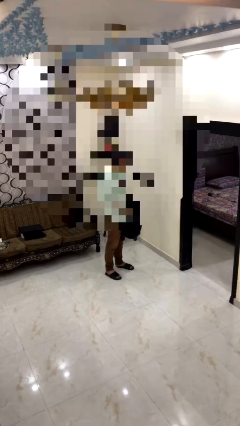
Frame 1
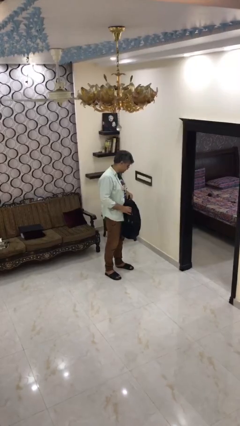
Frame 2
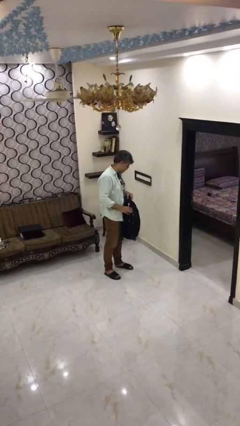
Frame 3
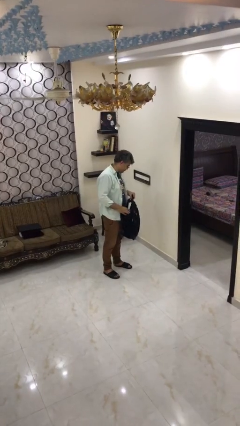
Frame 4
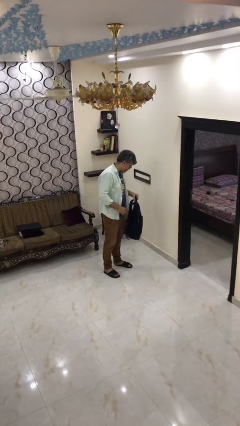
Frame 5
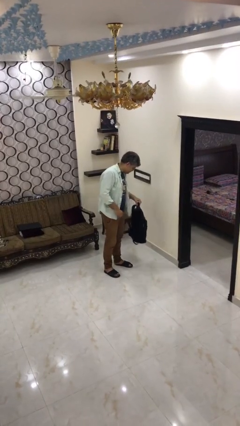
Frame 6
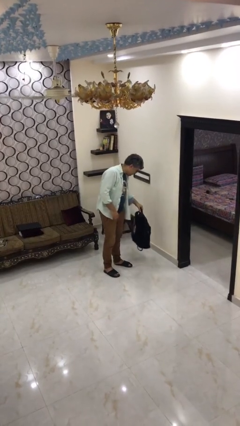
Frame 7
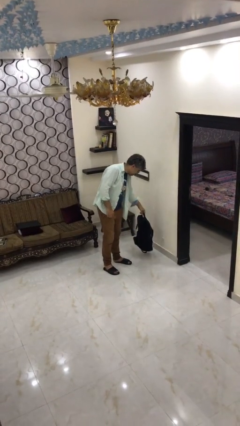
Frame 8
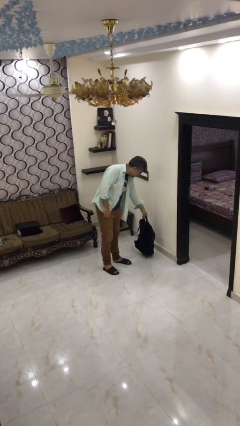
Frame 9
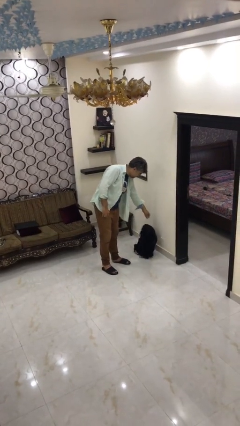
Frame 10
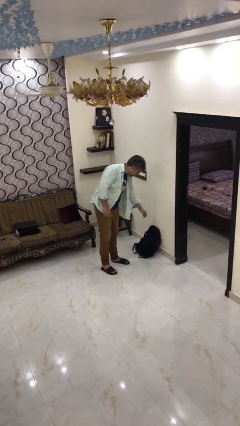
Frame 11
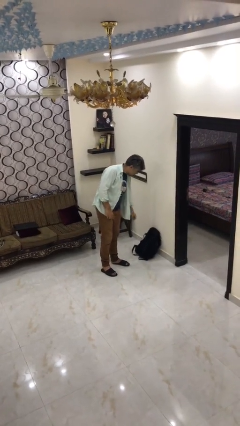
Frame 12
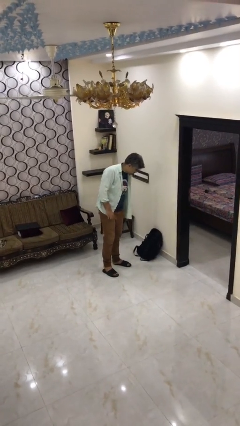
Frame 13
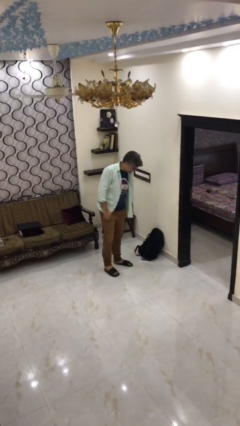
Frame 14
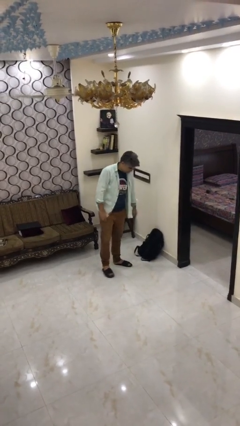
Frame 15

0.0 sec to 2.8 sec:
person puts down object on floor

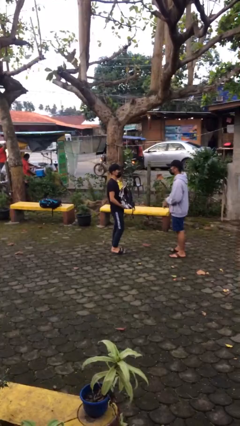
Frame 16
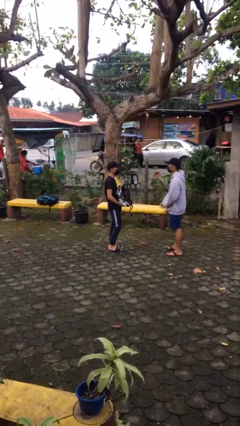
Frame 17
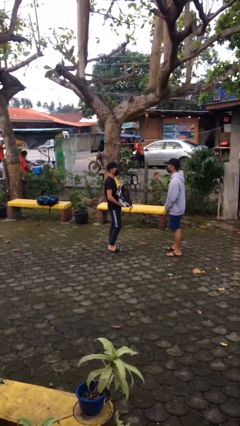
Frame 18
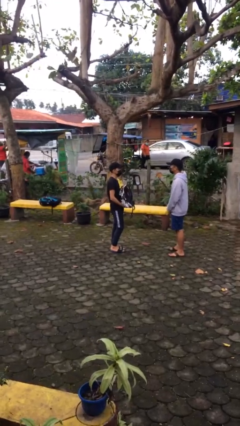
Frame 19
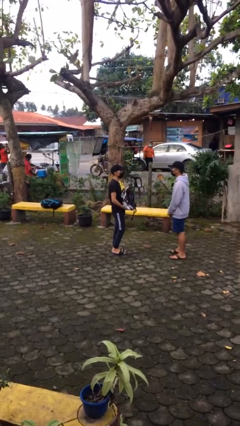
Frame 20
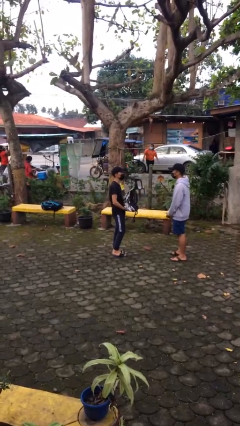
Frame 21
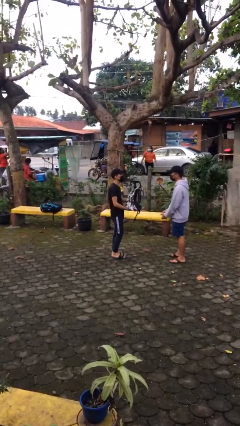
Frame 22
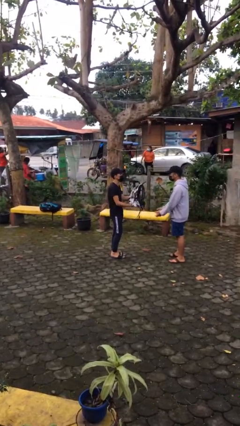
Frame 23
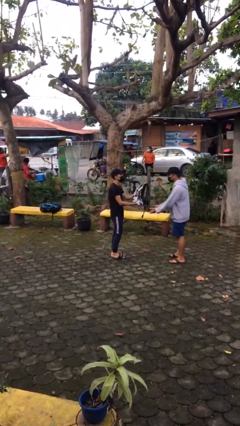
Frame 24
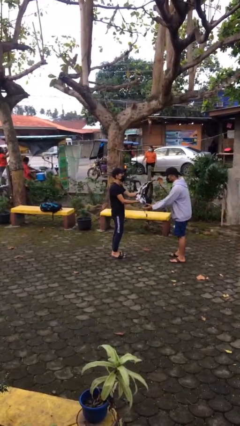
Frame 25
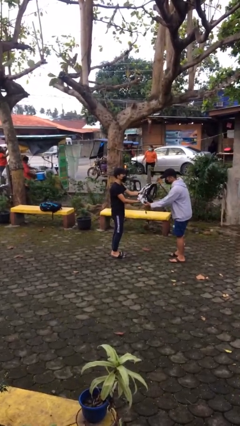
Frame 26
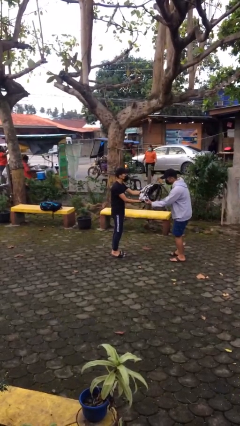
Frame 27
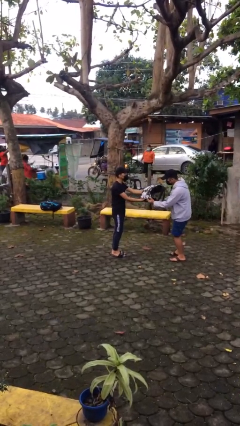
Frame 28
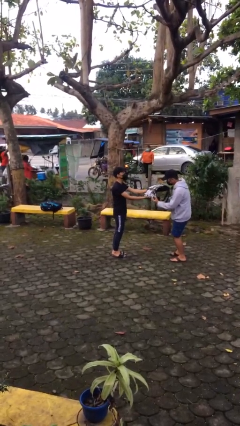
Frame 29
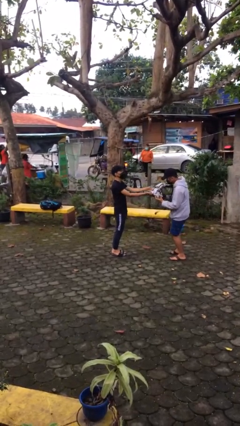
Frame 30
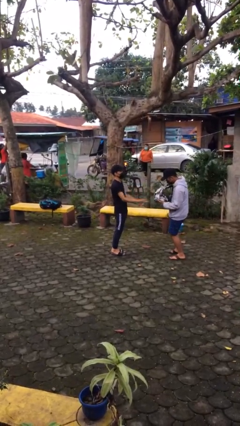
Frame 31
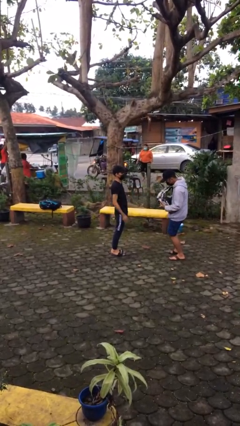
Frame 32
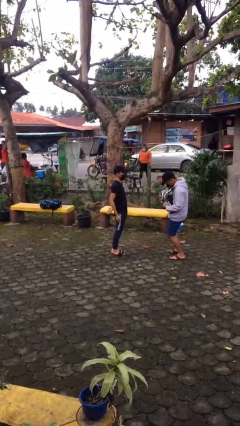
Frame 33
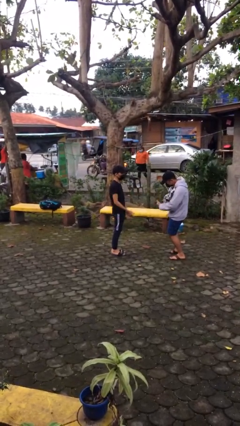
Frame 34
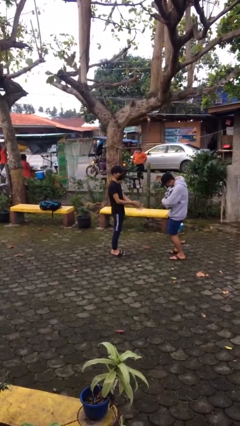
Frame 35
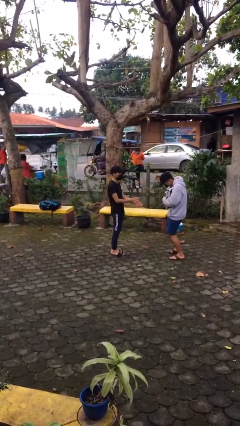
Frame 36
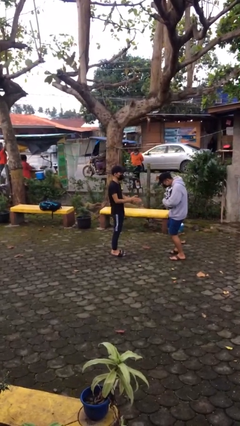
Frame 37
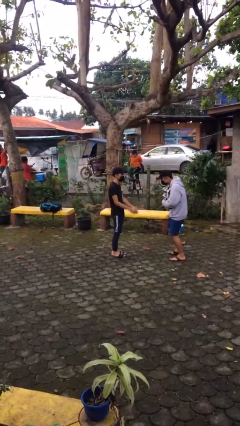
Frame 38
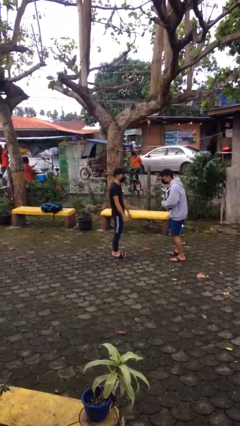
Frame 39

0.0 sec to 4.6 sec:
person transfers object to person

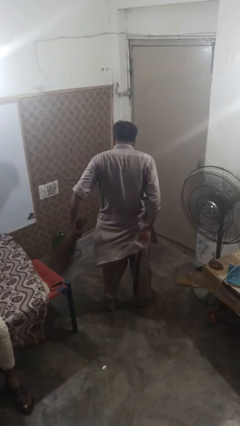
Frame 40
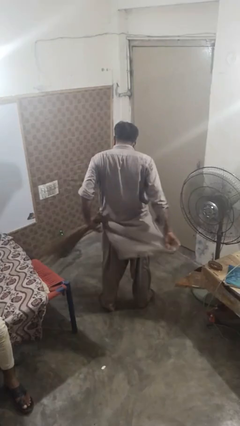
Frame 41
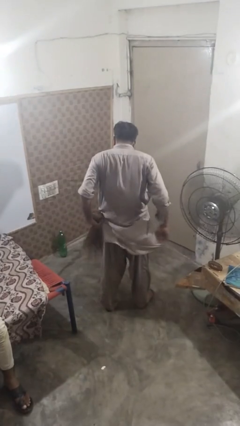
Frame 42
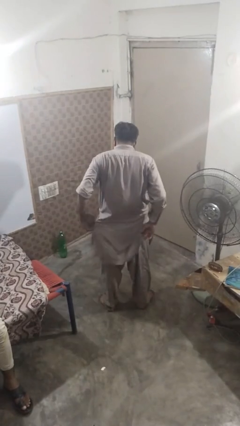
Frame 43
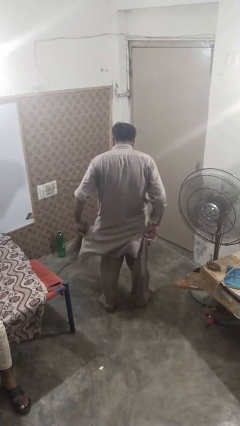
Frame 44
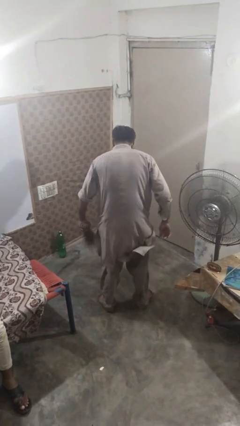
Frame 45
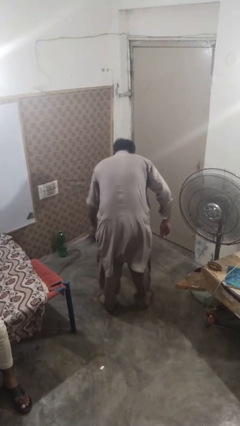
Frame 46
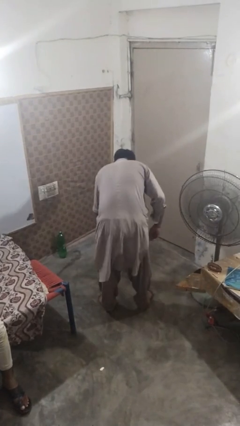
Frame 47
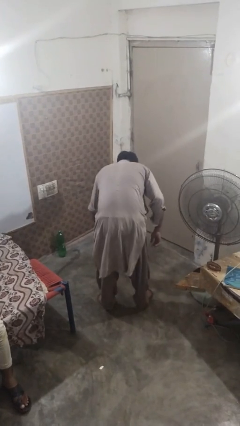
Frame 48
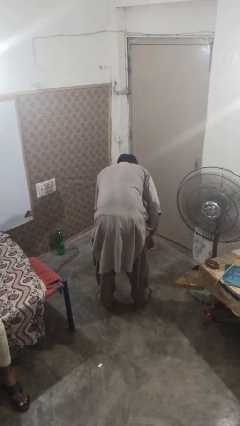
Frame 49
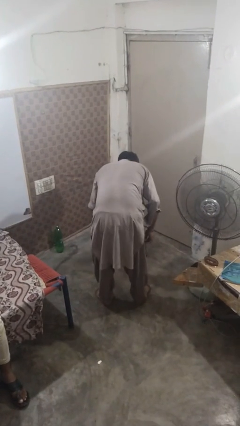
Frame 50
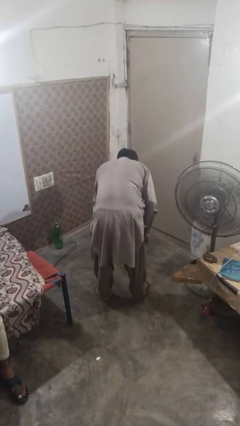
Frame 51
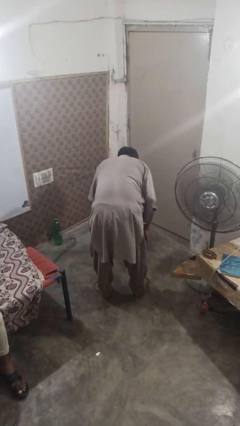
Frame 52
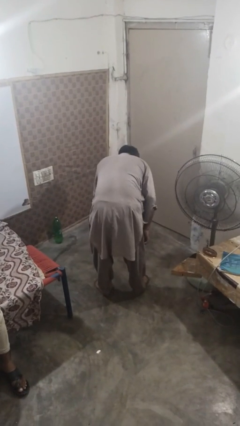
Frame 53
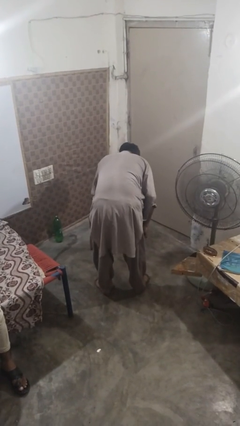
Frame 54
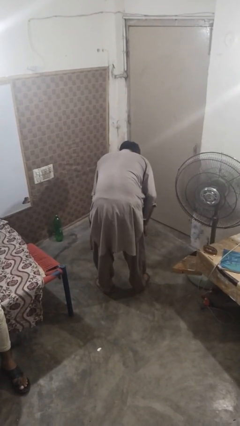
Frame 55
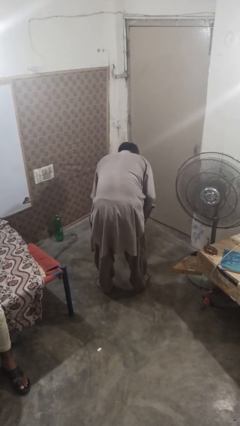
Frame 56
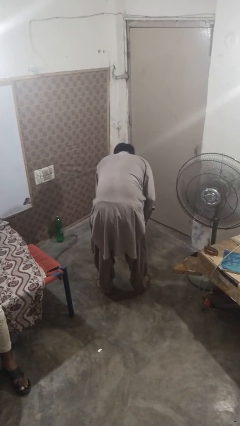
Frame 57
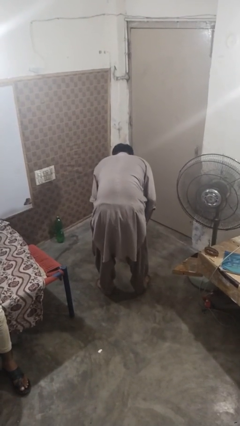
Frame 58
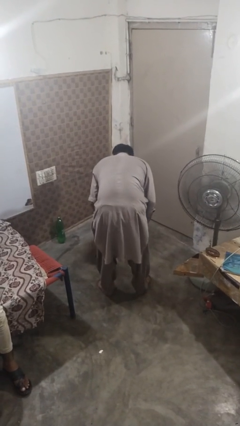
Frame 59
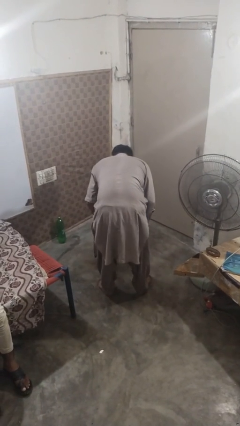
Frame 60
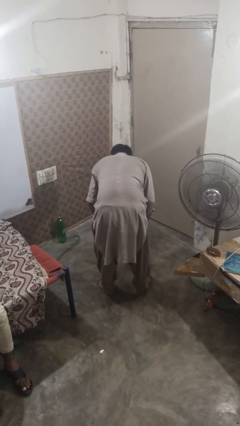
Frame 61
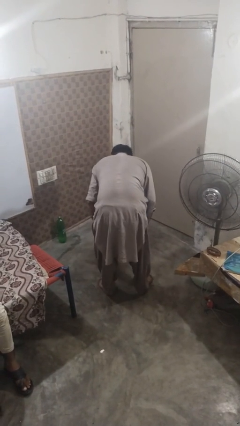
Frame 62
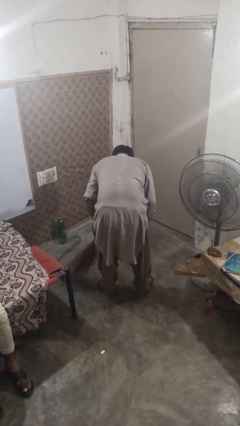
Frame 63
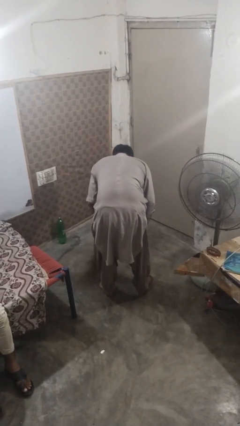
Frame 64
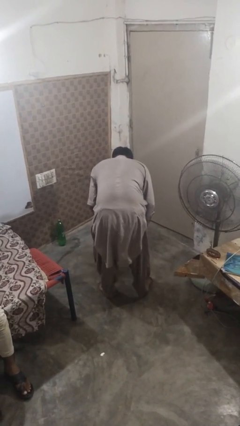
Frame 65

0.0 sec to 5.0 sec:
person sweeps floor

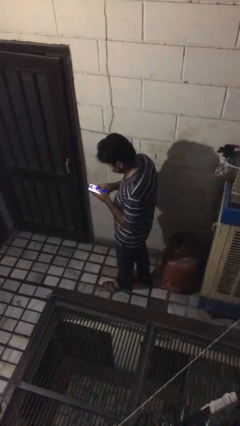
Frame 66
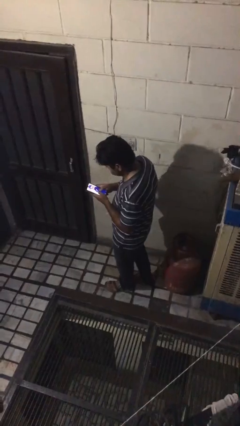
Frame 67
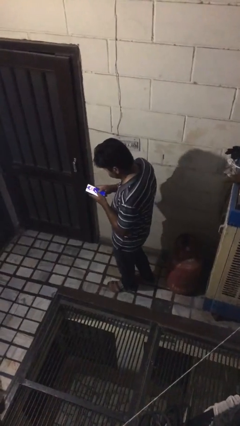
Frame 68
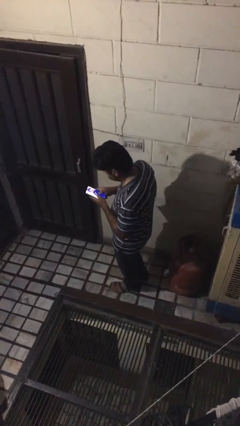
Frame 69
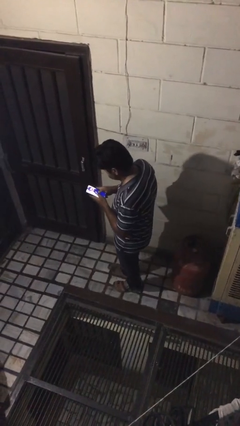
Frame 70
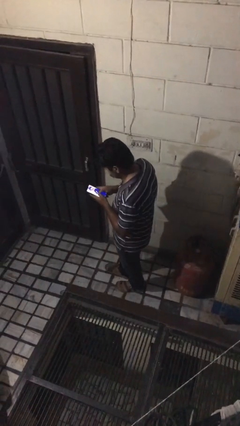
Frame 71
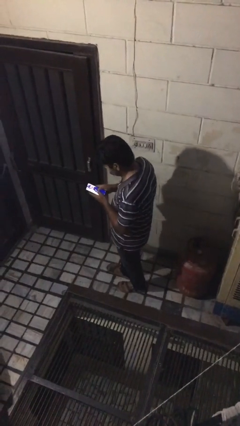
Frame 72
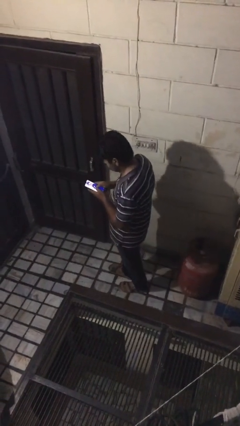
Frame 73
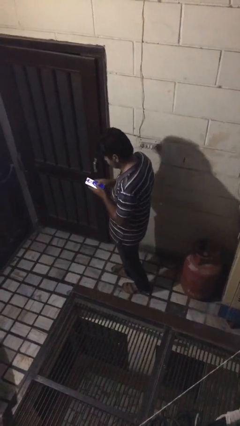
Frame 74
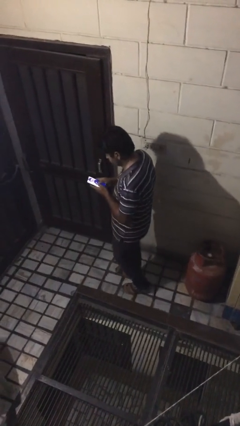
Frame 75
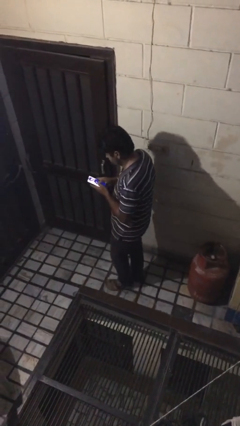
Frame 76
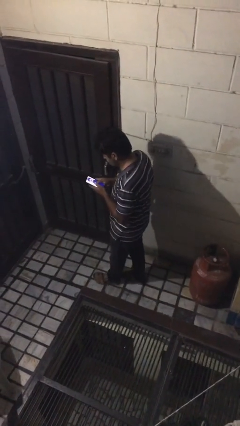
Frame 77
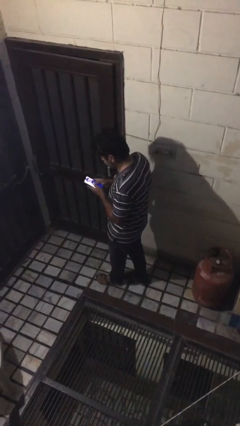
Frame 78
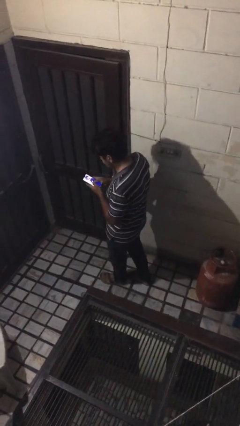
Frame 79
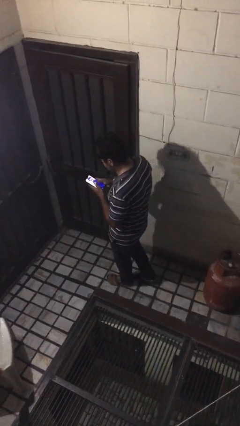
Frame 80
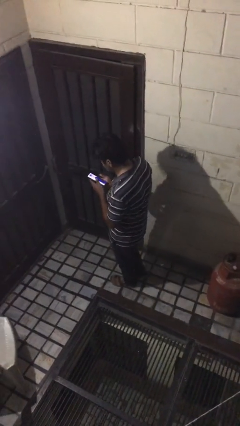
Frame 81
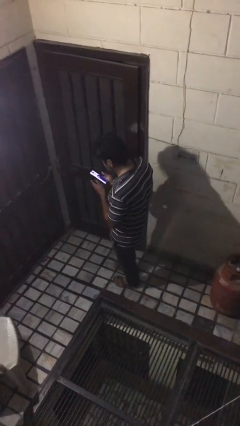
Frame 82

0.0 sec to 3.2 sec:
person texts on phone

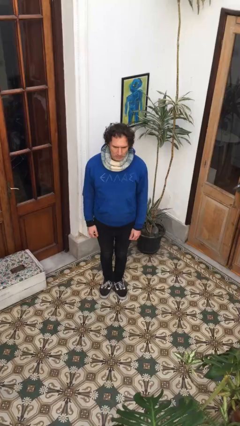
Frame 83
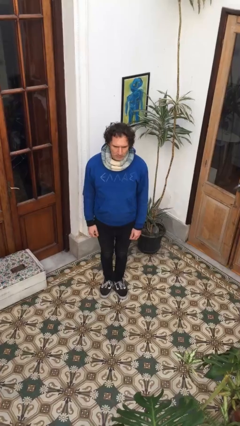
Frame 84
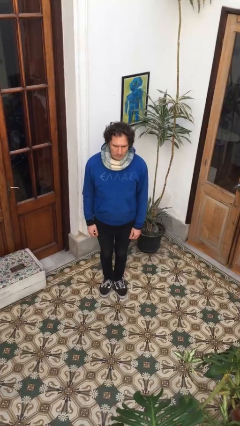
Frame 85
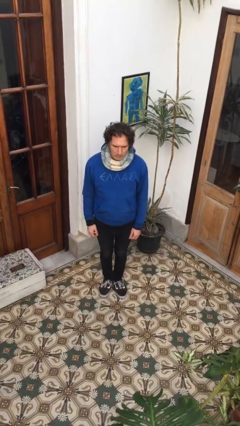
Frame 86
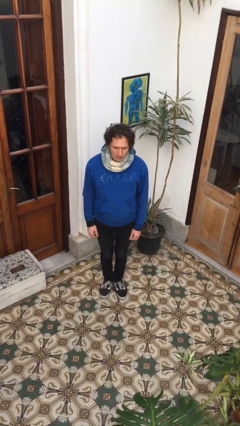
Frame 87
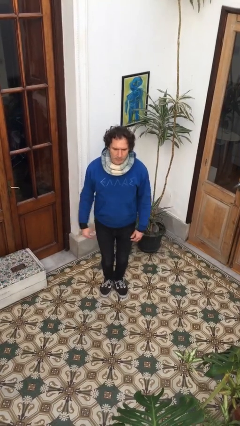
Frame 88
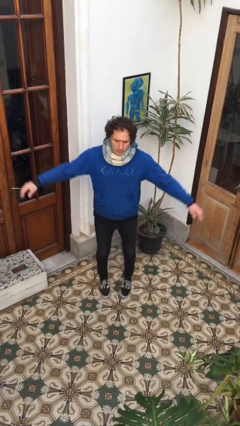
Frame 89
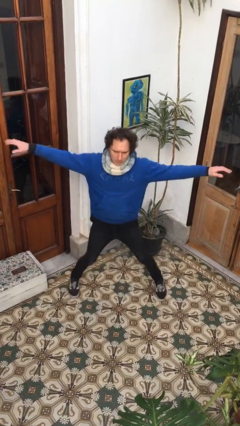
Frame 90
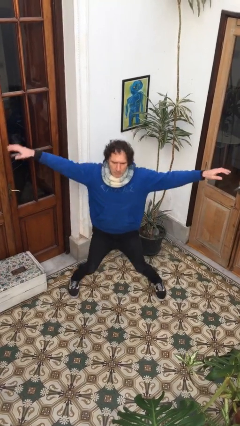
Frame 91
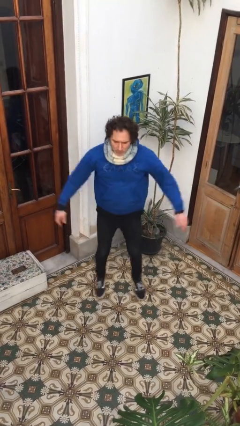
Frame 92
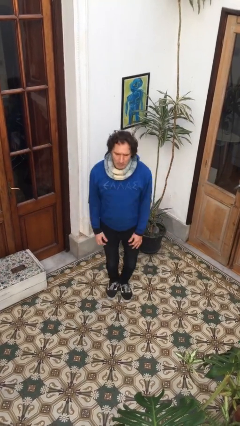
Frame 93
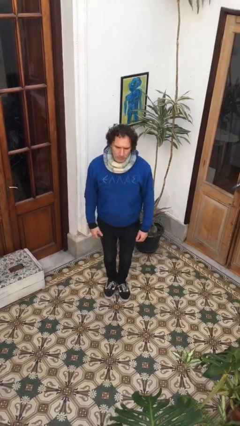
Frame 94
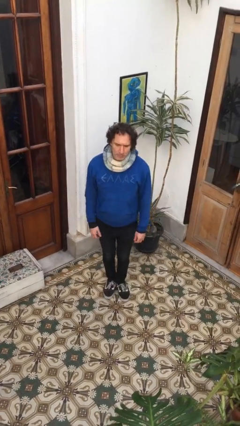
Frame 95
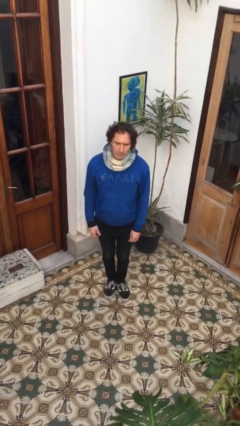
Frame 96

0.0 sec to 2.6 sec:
person exercises with jumping jacks
